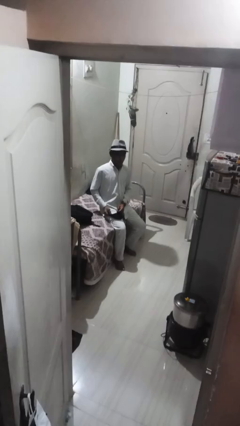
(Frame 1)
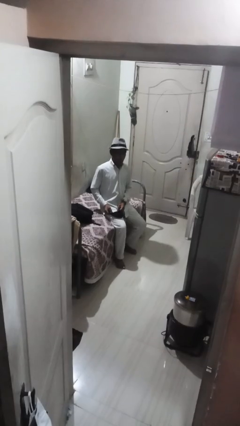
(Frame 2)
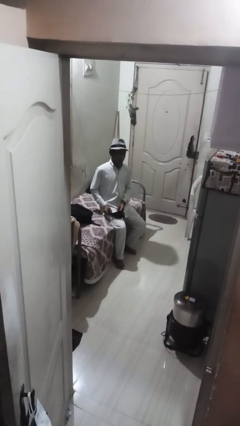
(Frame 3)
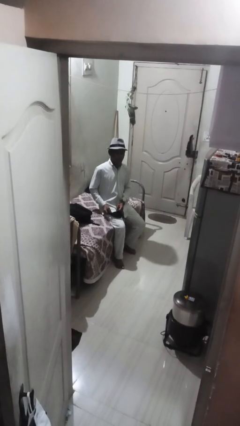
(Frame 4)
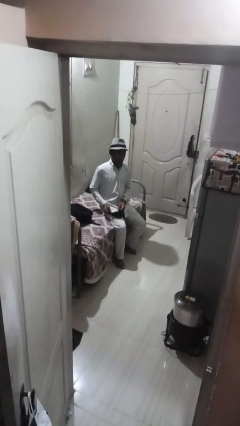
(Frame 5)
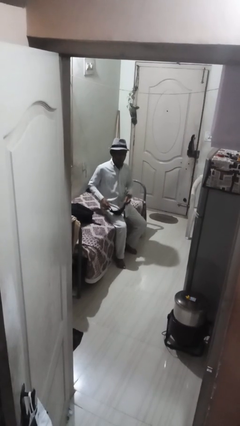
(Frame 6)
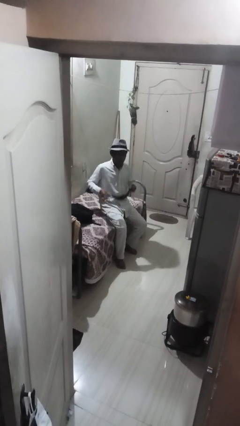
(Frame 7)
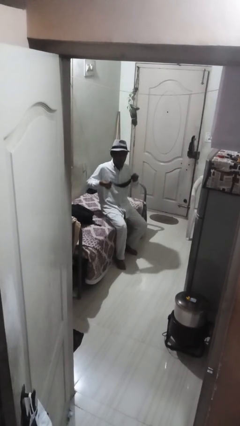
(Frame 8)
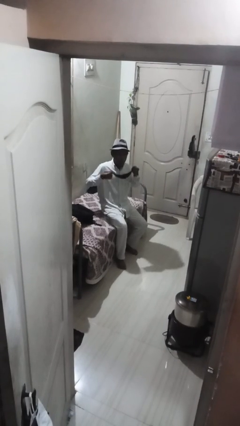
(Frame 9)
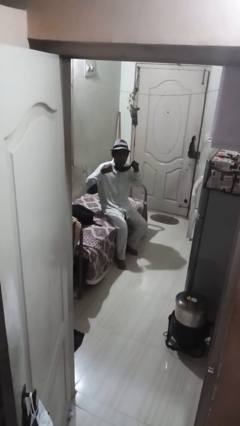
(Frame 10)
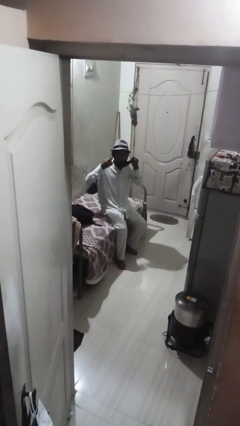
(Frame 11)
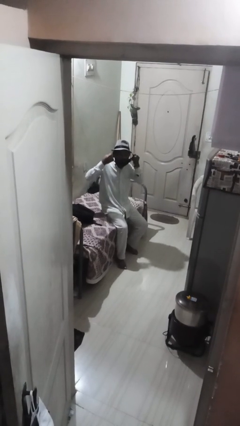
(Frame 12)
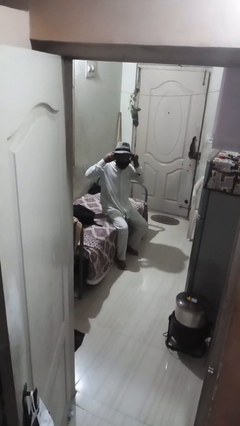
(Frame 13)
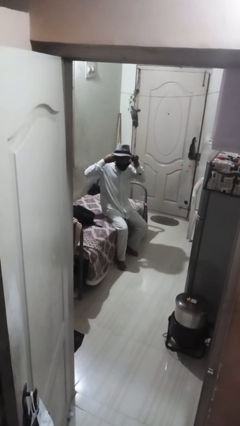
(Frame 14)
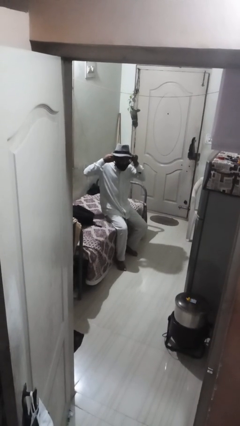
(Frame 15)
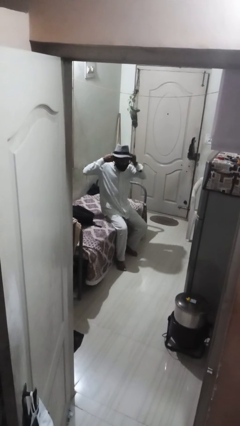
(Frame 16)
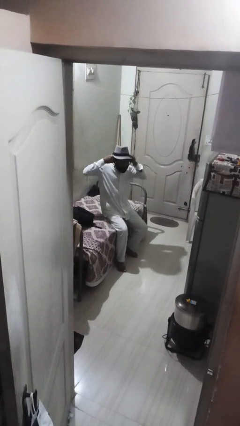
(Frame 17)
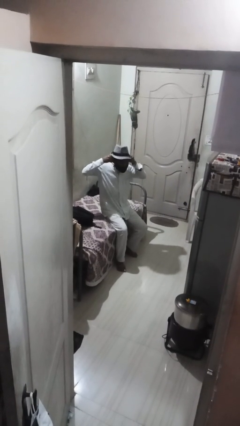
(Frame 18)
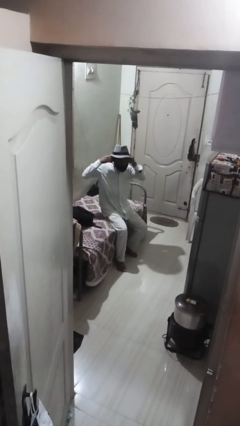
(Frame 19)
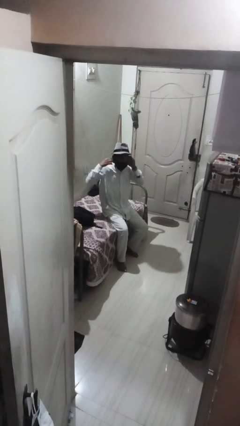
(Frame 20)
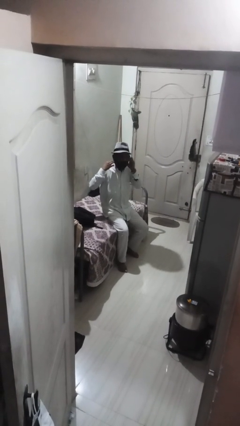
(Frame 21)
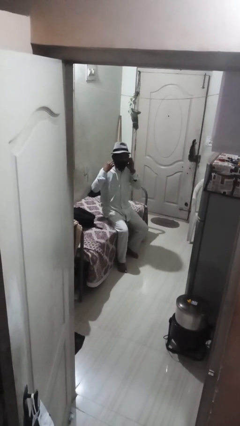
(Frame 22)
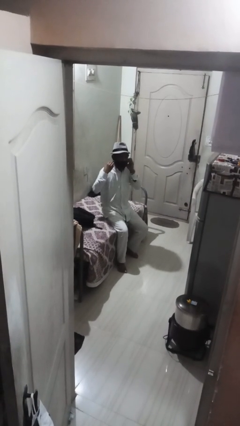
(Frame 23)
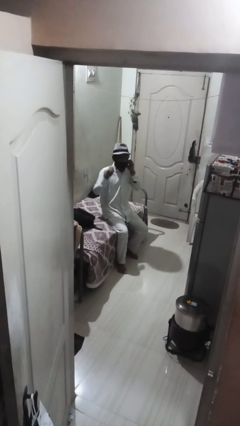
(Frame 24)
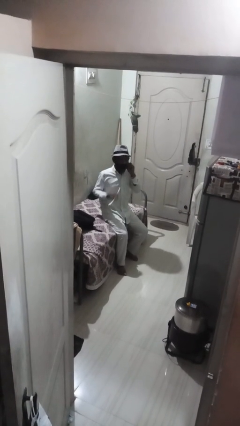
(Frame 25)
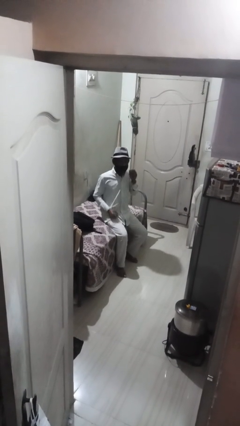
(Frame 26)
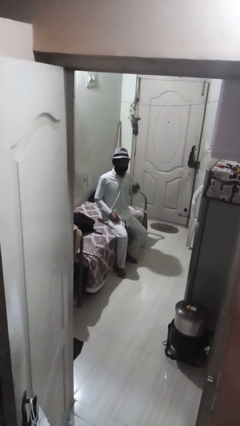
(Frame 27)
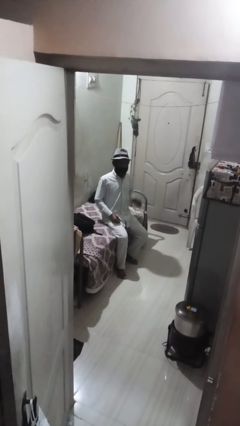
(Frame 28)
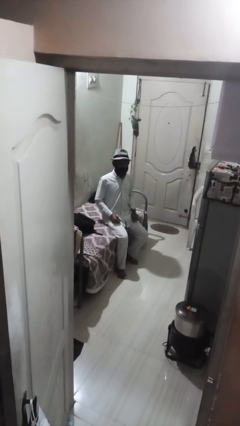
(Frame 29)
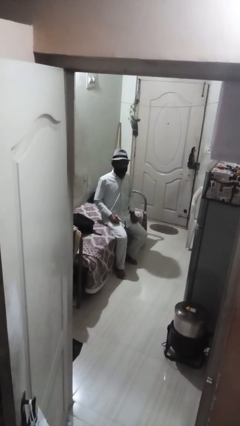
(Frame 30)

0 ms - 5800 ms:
person puts on facemask

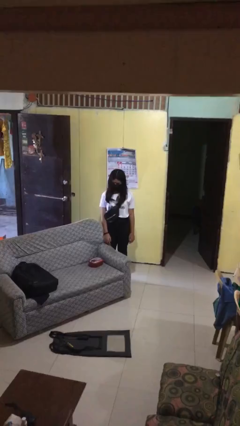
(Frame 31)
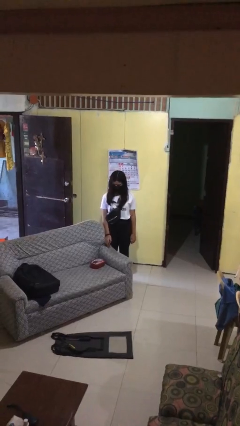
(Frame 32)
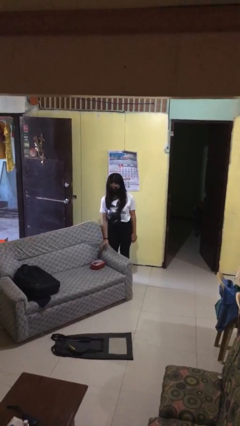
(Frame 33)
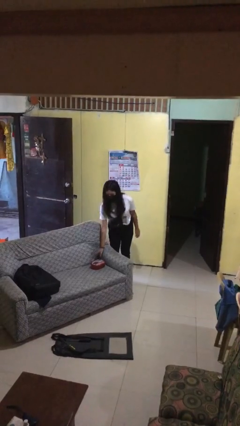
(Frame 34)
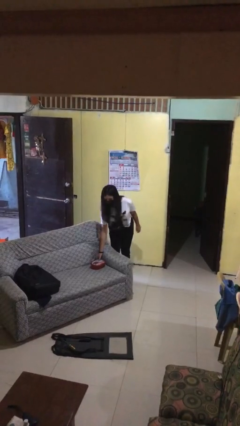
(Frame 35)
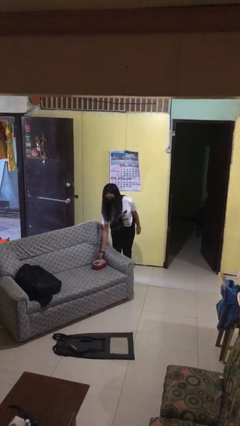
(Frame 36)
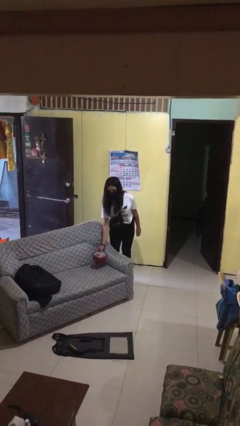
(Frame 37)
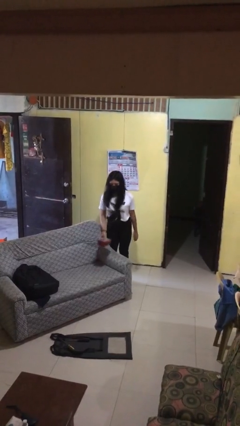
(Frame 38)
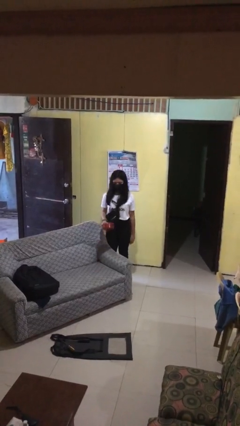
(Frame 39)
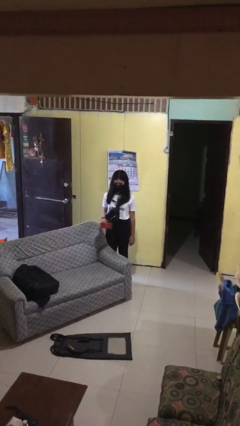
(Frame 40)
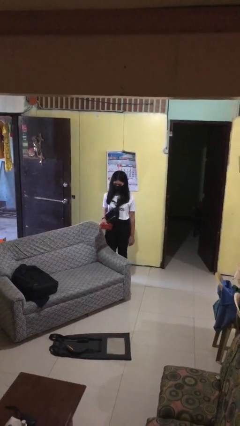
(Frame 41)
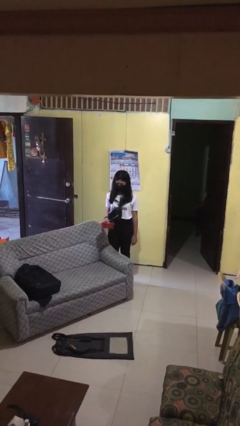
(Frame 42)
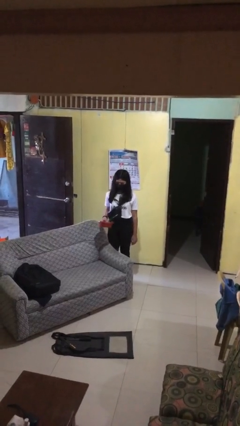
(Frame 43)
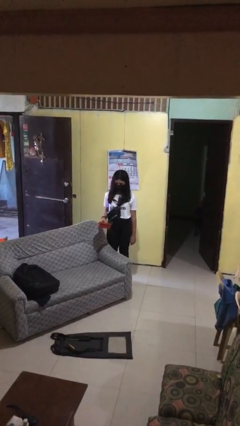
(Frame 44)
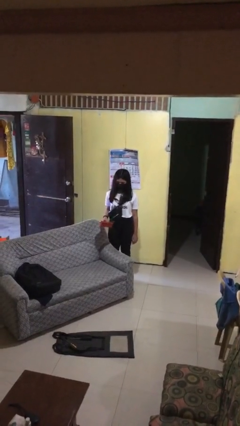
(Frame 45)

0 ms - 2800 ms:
person picks up object from couch

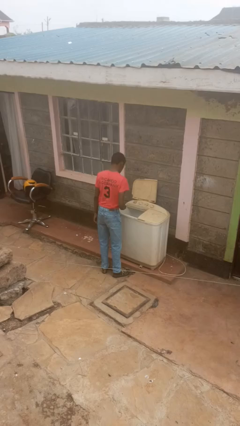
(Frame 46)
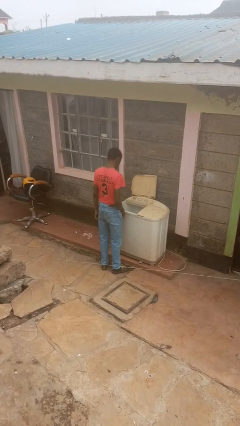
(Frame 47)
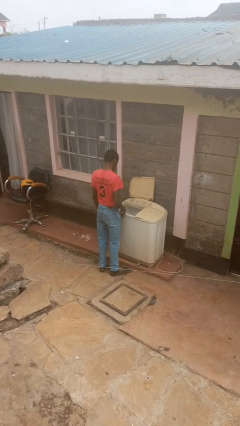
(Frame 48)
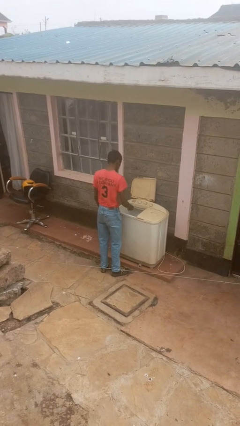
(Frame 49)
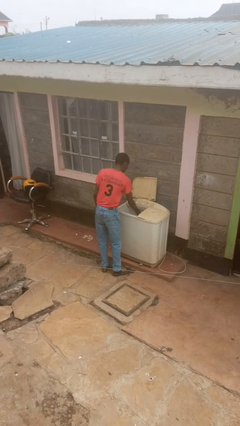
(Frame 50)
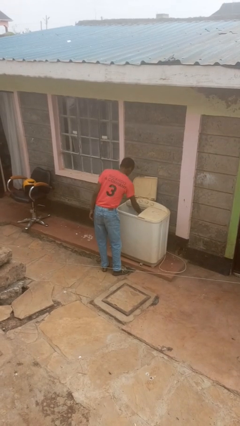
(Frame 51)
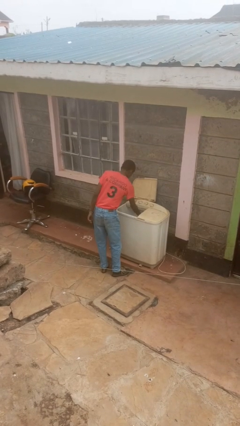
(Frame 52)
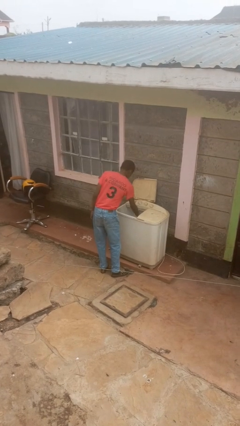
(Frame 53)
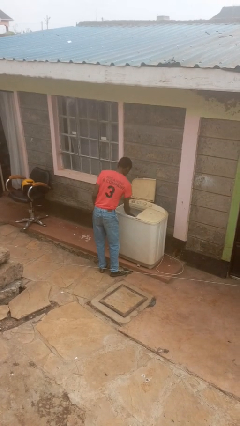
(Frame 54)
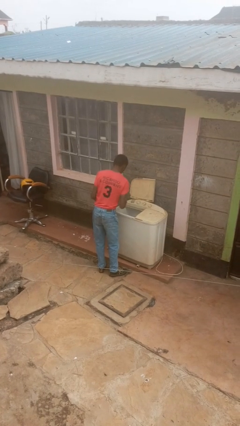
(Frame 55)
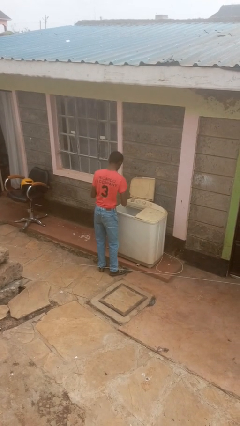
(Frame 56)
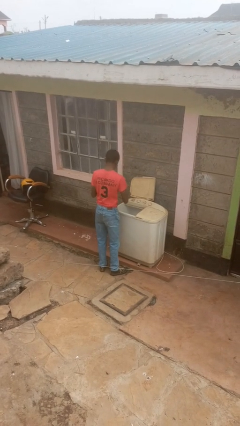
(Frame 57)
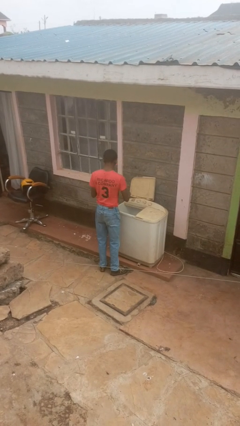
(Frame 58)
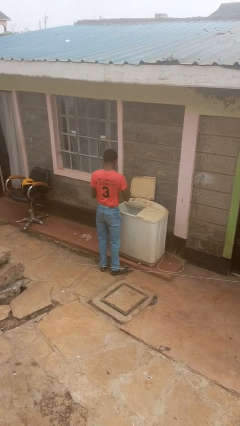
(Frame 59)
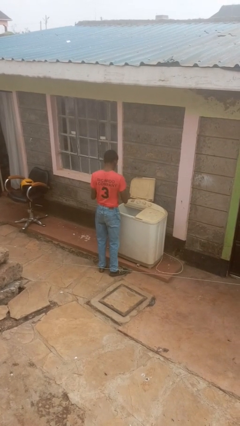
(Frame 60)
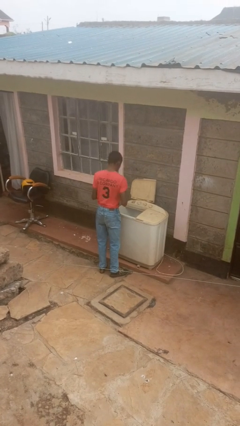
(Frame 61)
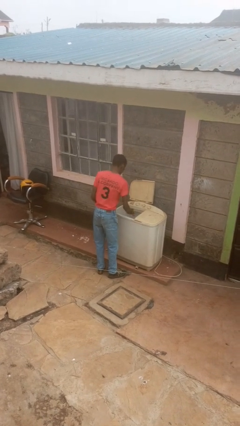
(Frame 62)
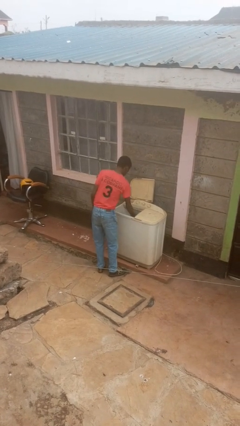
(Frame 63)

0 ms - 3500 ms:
person cleans dryer lint trap

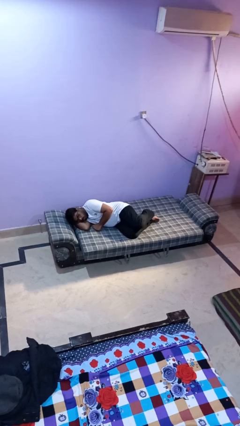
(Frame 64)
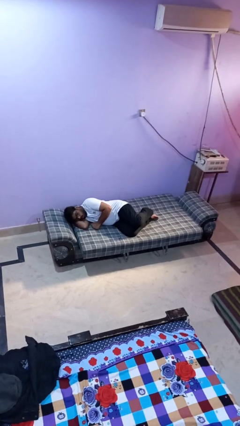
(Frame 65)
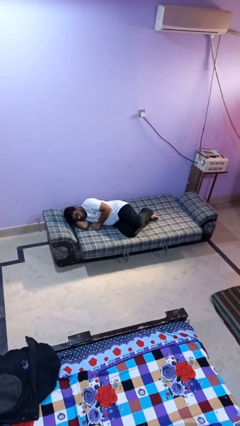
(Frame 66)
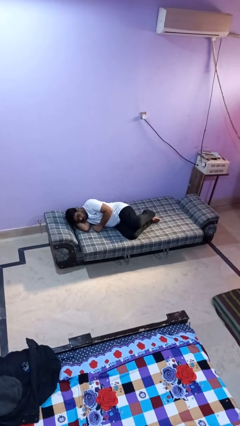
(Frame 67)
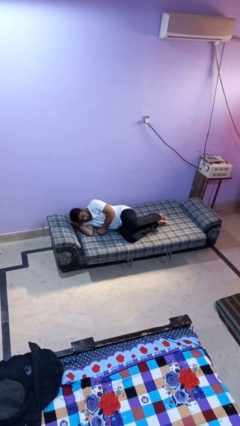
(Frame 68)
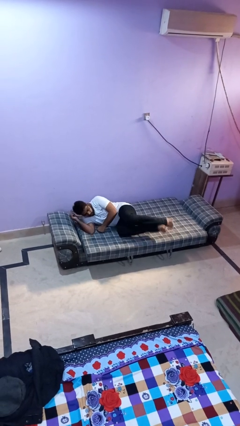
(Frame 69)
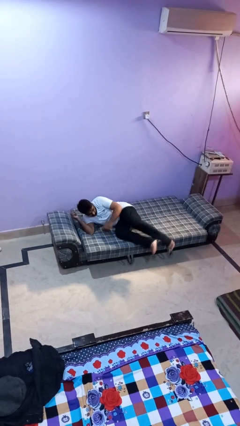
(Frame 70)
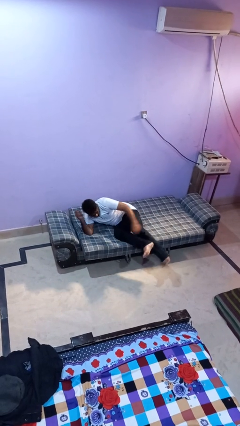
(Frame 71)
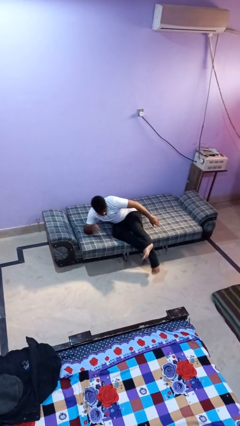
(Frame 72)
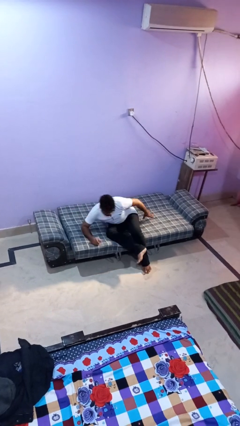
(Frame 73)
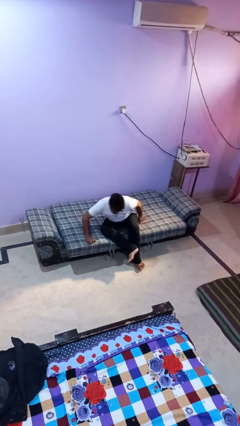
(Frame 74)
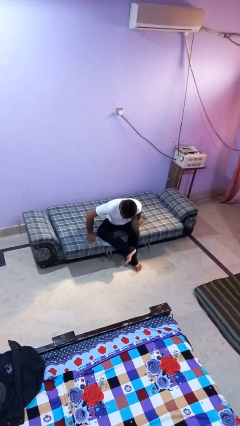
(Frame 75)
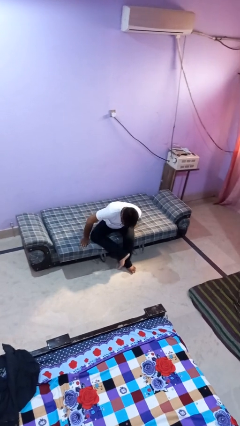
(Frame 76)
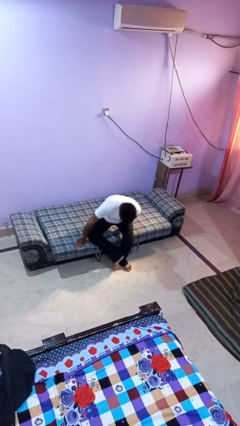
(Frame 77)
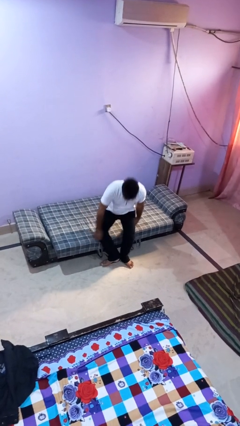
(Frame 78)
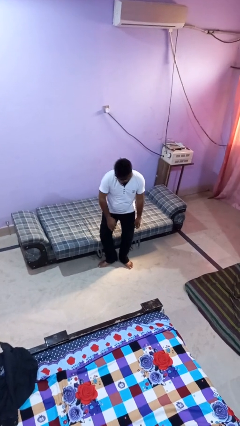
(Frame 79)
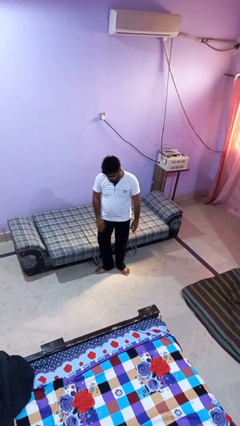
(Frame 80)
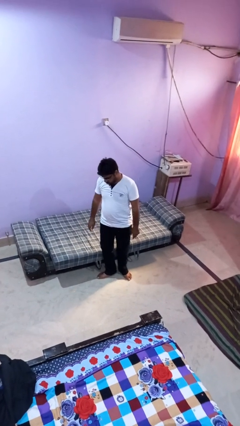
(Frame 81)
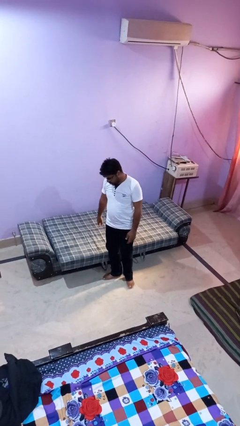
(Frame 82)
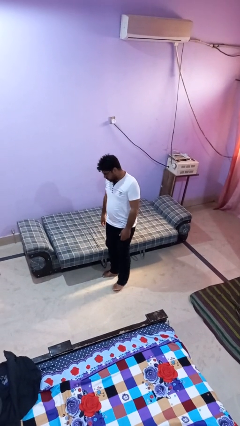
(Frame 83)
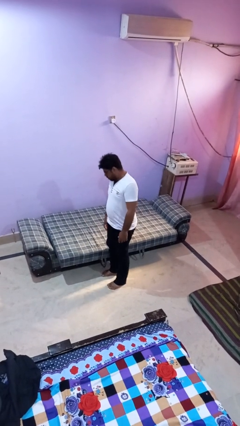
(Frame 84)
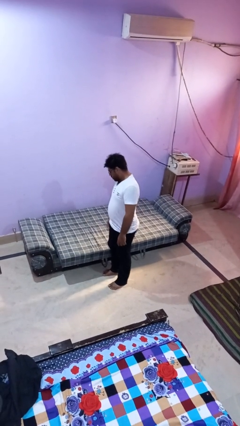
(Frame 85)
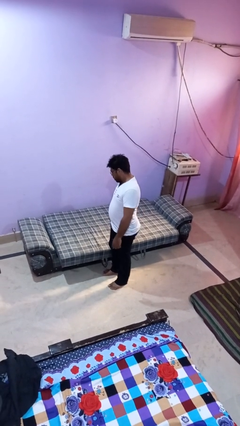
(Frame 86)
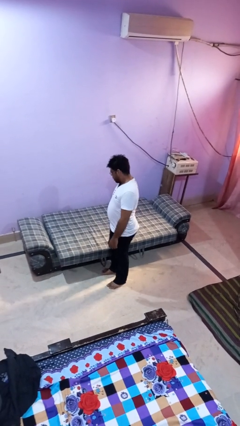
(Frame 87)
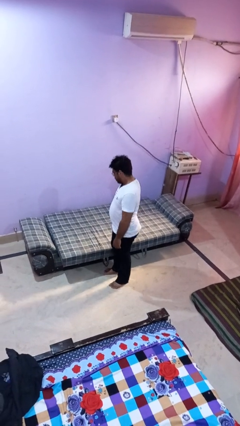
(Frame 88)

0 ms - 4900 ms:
person stands up

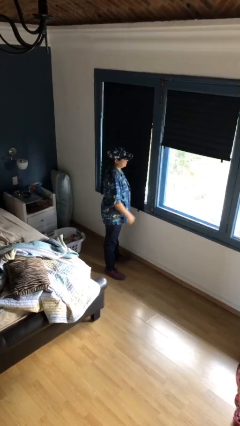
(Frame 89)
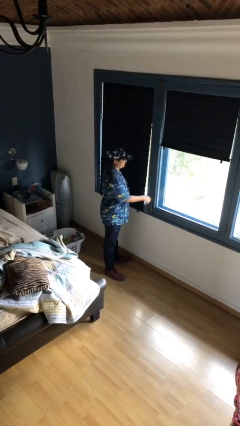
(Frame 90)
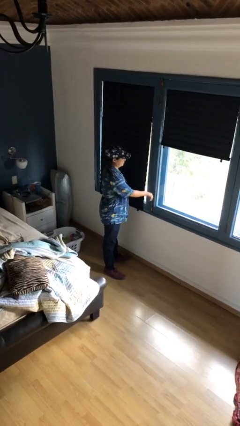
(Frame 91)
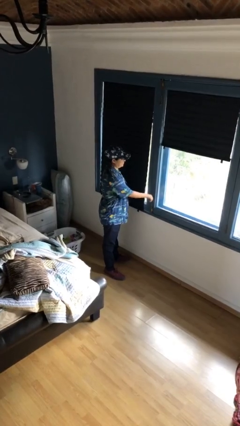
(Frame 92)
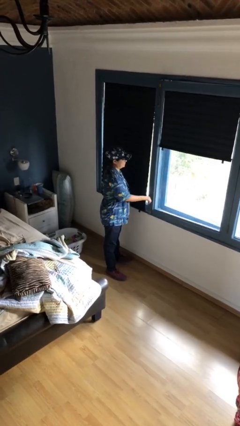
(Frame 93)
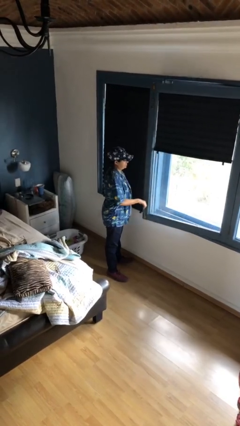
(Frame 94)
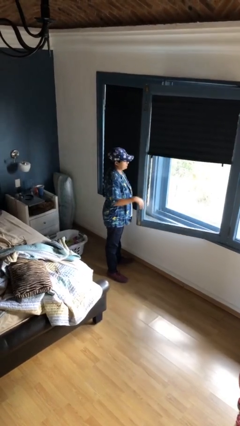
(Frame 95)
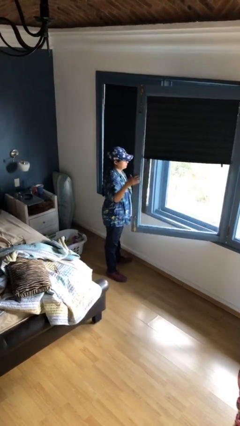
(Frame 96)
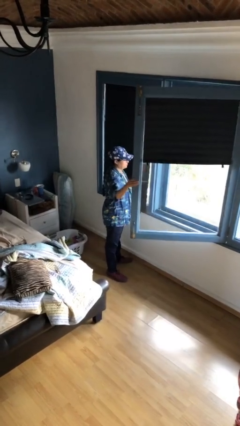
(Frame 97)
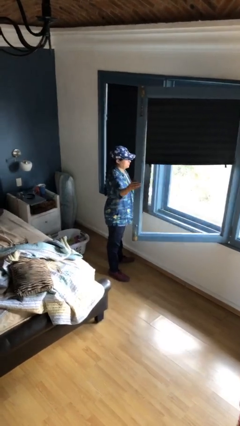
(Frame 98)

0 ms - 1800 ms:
person opens home window
